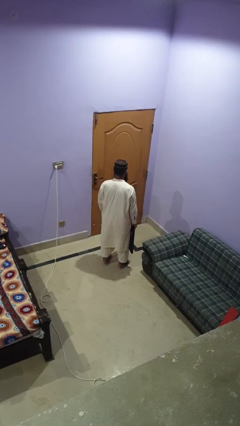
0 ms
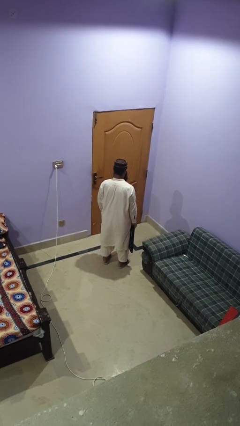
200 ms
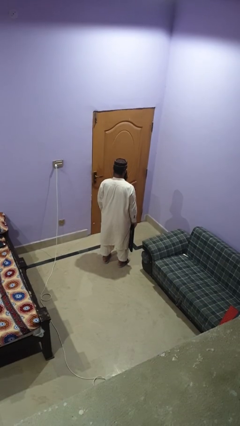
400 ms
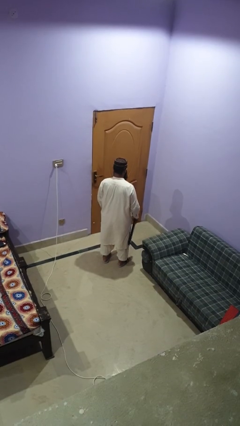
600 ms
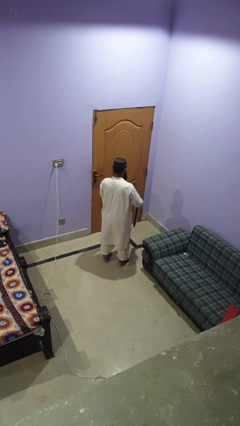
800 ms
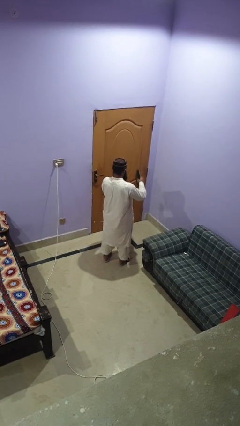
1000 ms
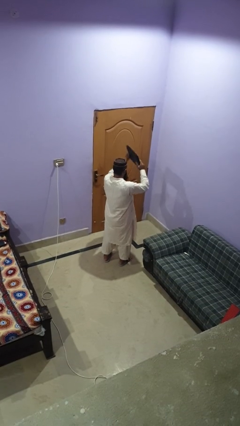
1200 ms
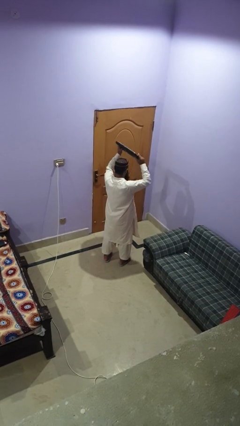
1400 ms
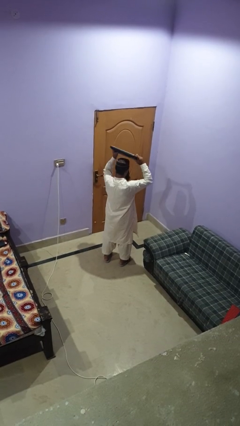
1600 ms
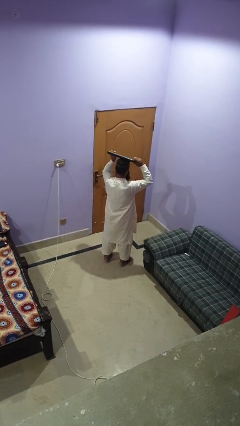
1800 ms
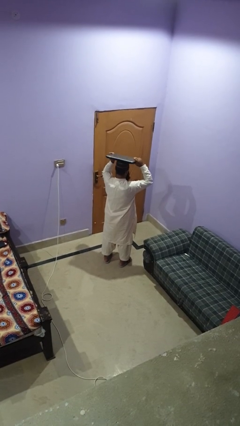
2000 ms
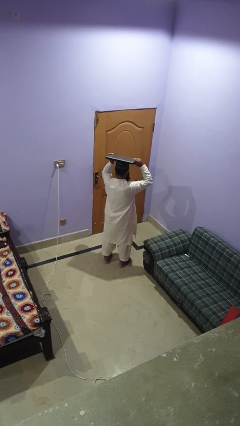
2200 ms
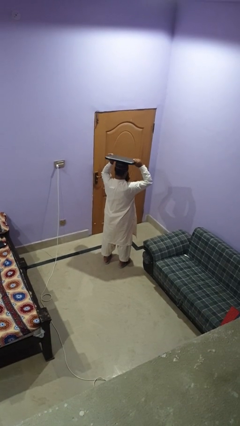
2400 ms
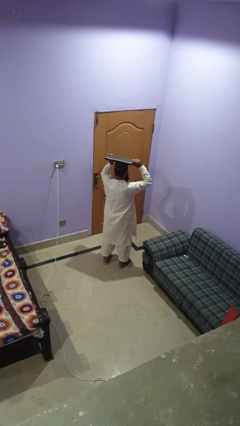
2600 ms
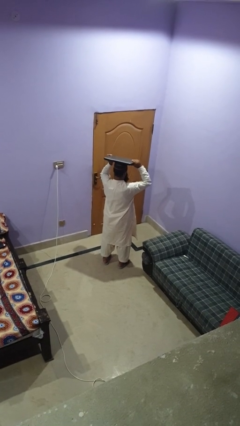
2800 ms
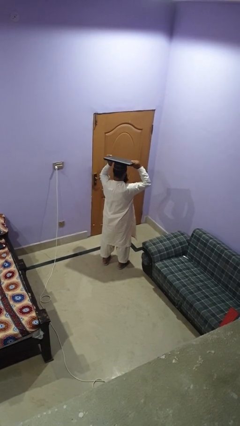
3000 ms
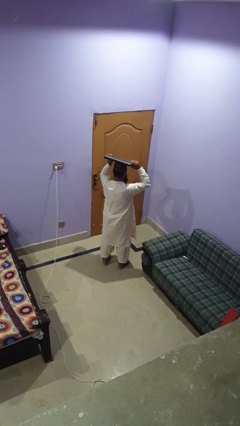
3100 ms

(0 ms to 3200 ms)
person holds object above head

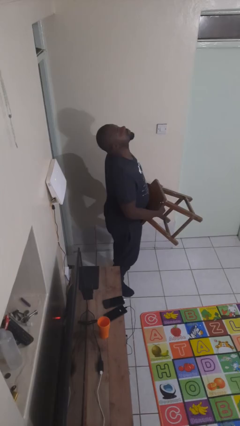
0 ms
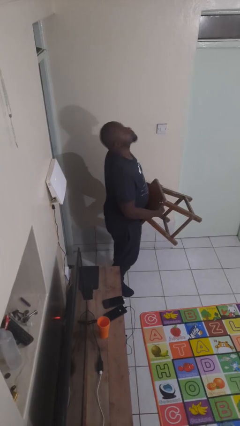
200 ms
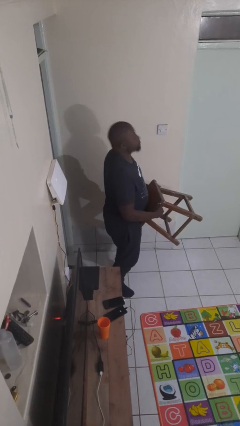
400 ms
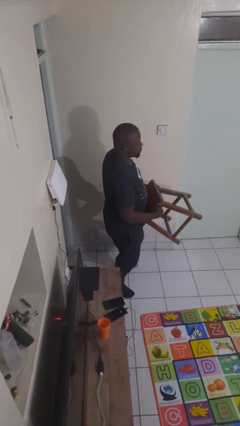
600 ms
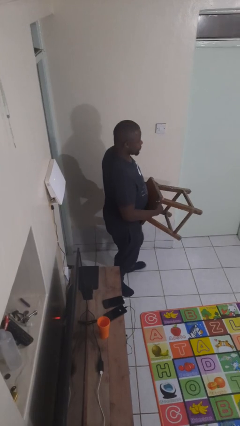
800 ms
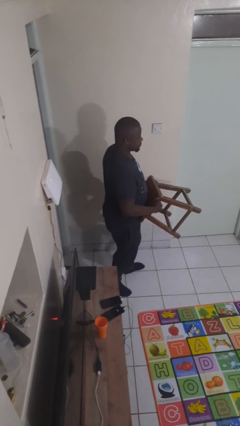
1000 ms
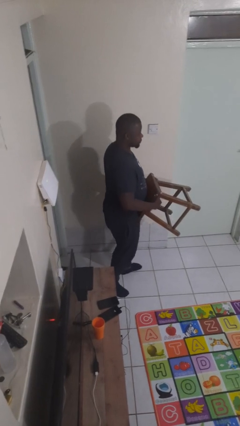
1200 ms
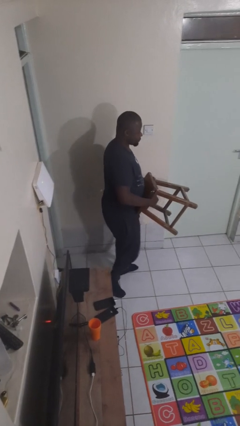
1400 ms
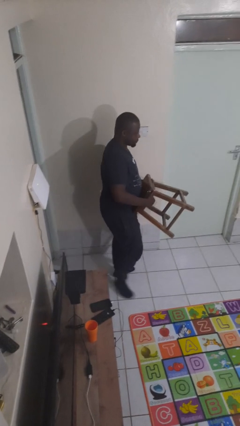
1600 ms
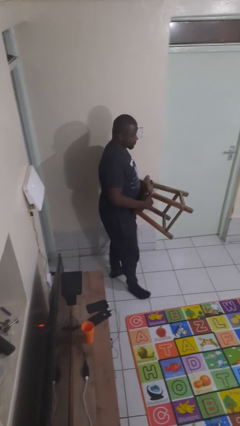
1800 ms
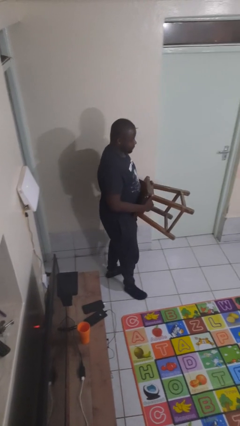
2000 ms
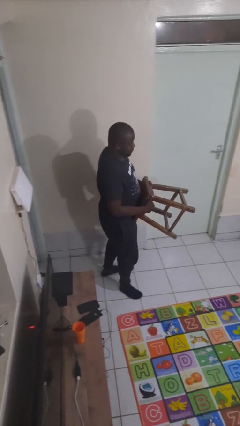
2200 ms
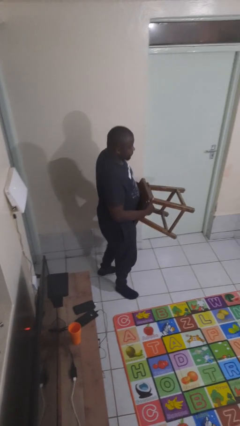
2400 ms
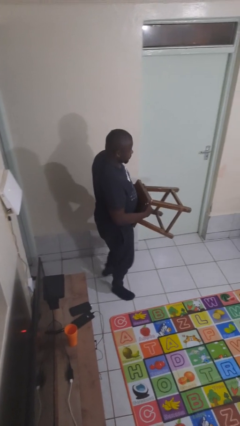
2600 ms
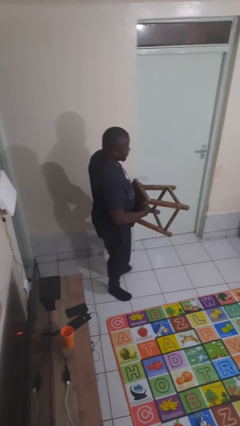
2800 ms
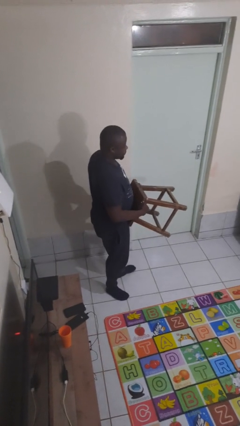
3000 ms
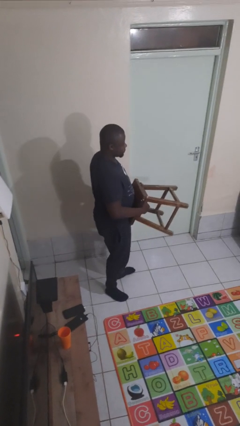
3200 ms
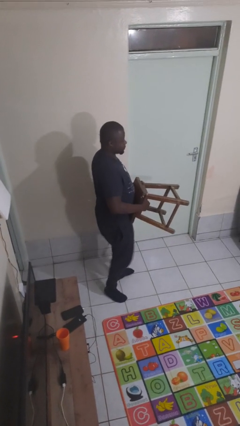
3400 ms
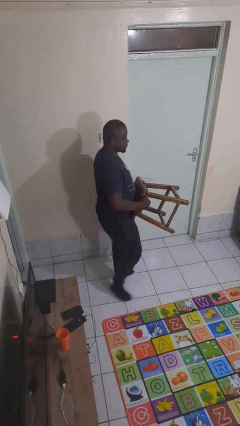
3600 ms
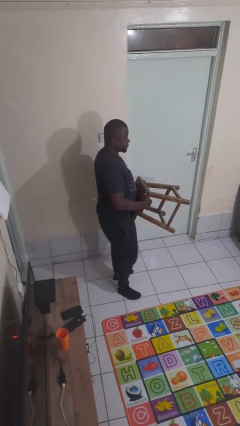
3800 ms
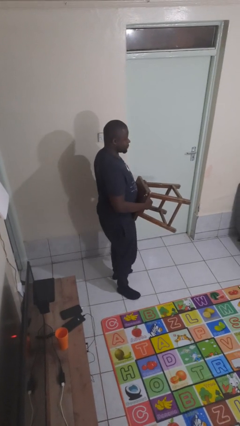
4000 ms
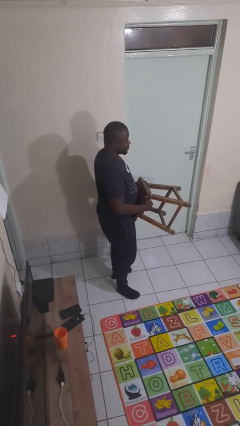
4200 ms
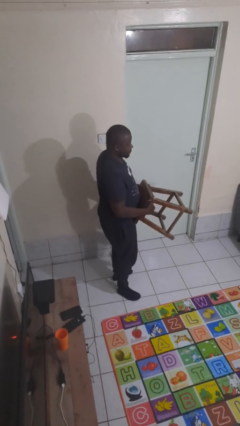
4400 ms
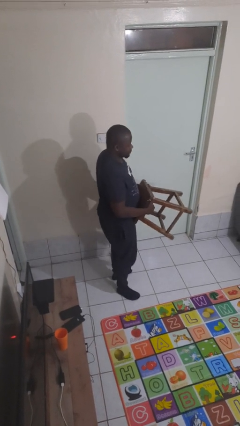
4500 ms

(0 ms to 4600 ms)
person carries furniture

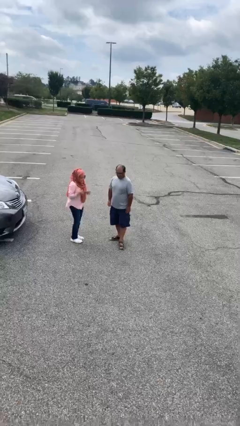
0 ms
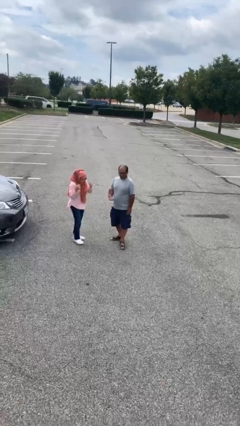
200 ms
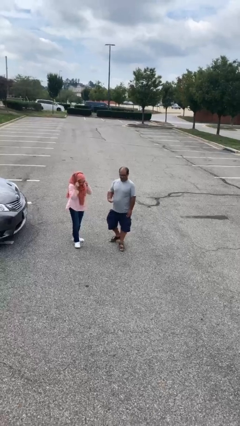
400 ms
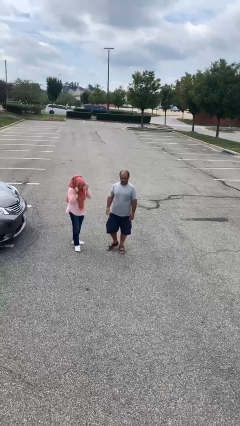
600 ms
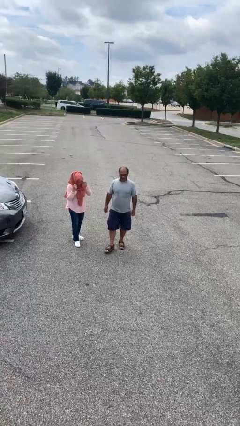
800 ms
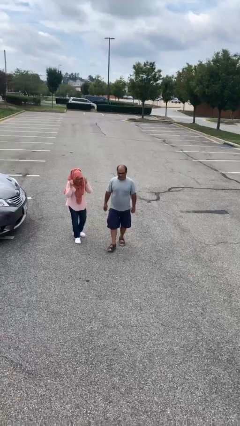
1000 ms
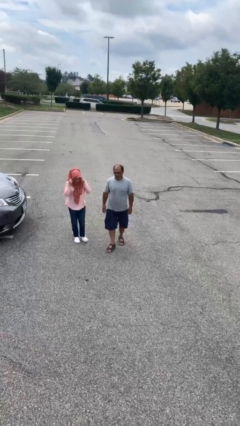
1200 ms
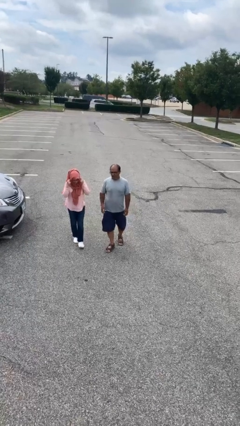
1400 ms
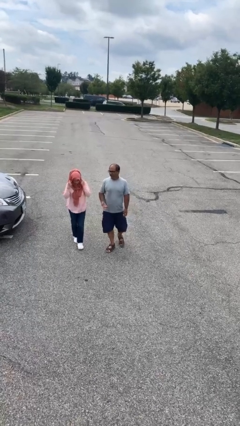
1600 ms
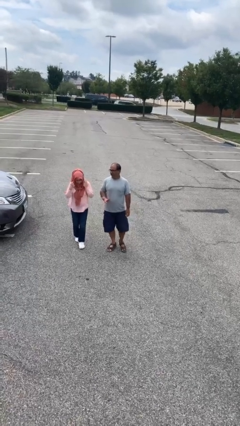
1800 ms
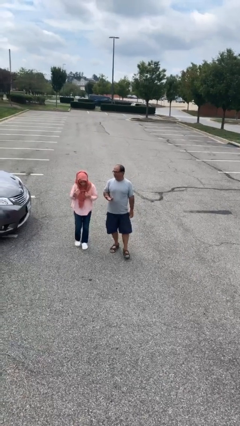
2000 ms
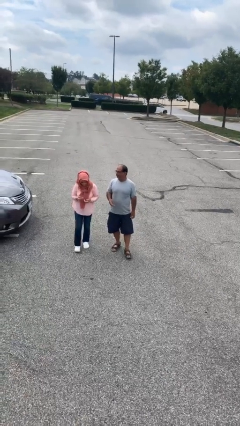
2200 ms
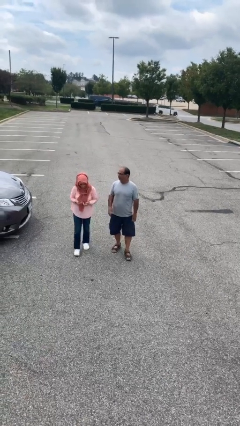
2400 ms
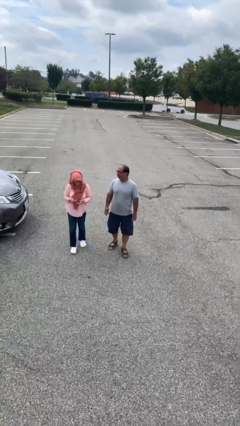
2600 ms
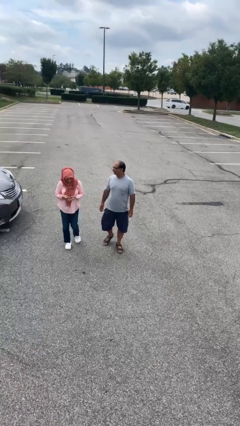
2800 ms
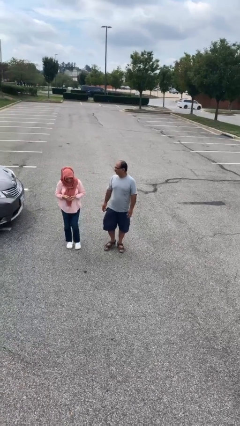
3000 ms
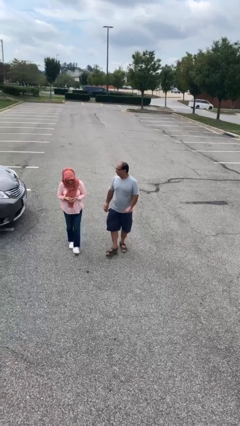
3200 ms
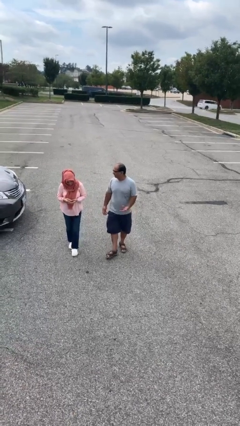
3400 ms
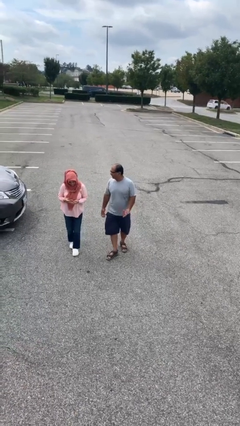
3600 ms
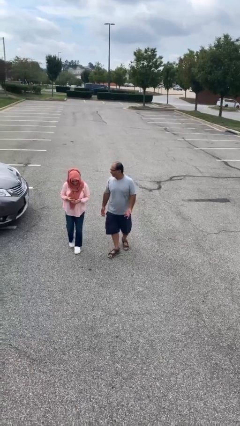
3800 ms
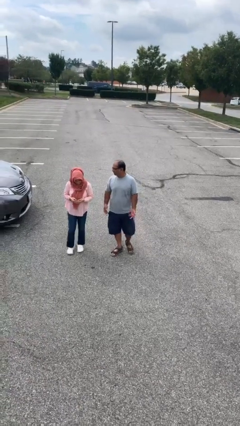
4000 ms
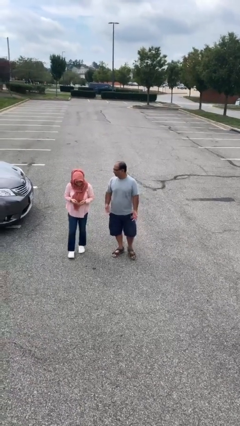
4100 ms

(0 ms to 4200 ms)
person talks to person

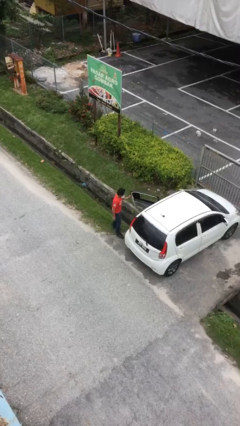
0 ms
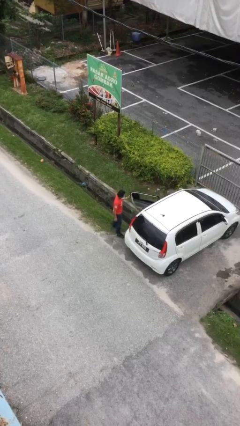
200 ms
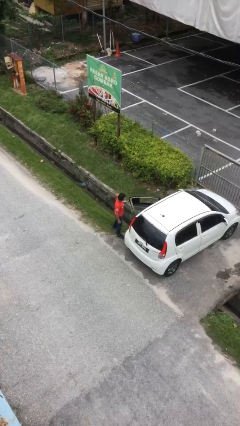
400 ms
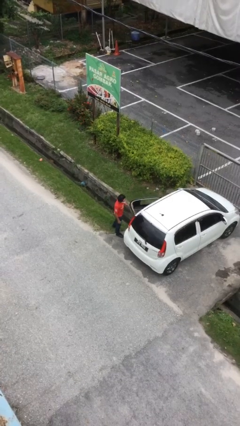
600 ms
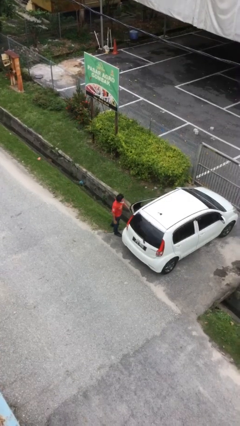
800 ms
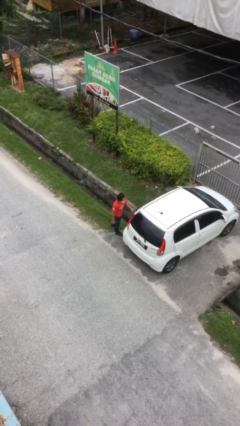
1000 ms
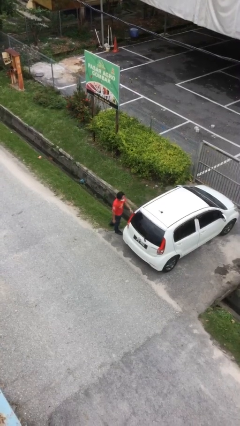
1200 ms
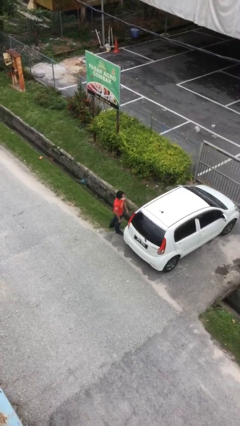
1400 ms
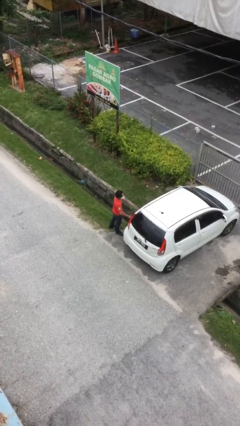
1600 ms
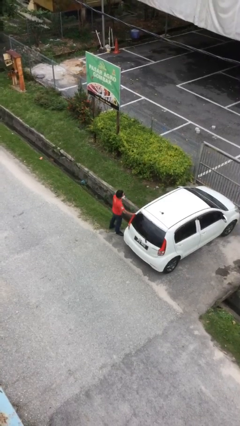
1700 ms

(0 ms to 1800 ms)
person closes car door

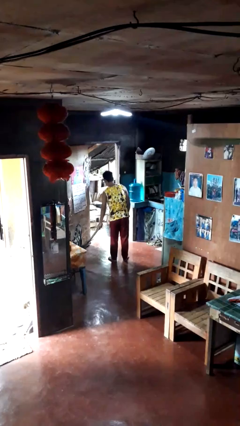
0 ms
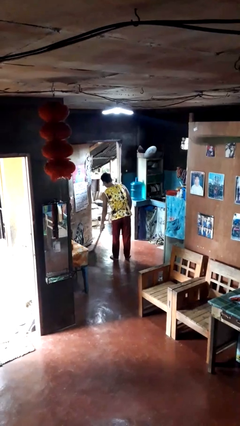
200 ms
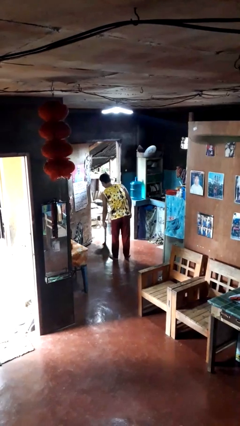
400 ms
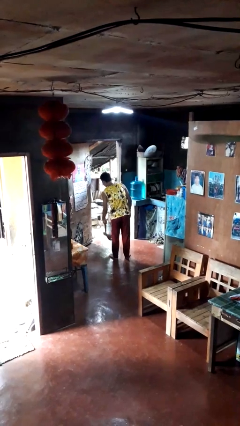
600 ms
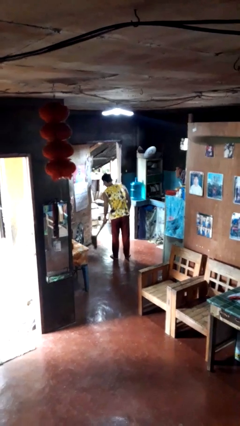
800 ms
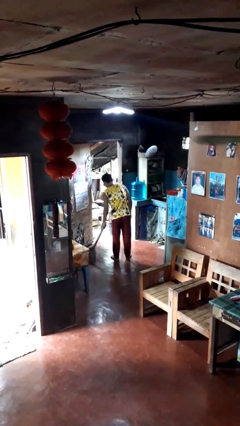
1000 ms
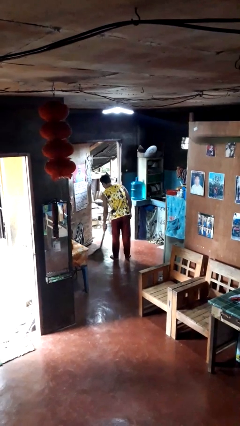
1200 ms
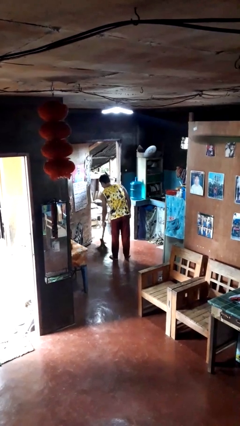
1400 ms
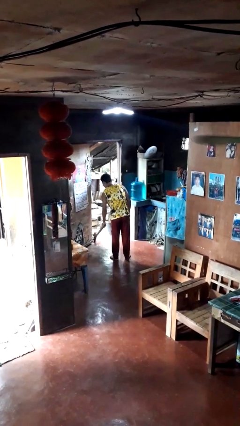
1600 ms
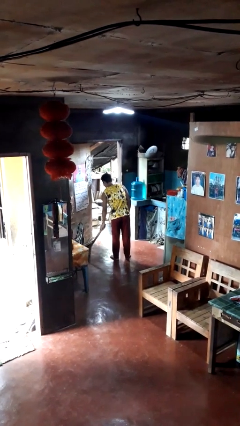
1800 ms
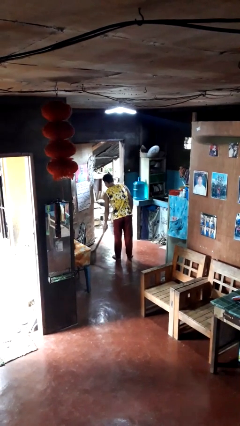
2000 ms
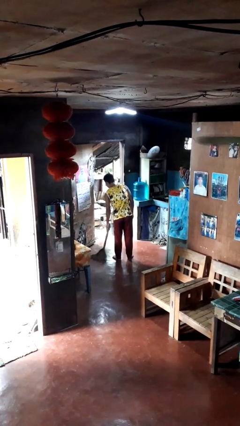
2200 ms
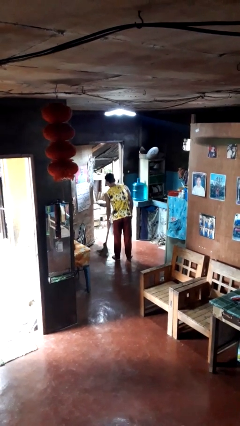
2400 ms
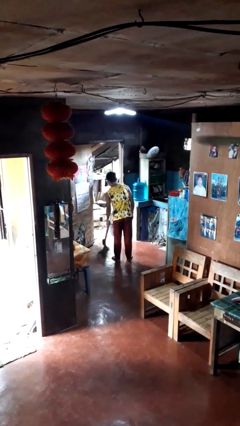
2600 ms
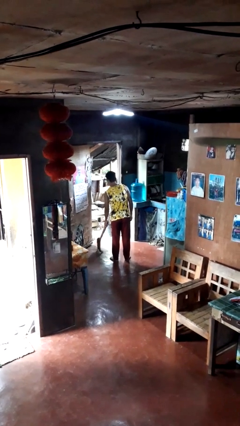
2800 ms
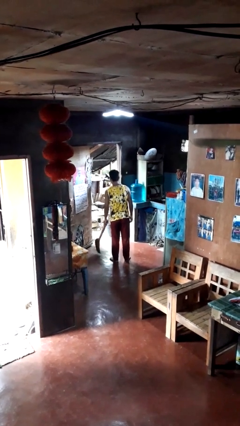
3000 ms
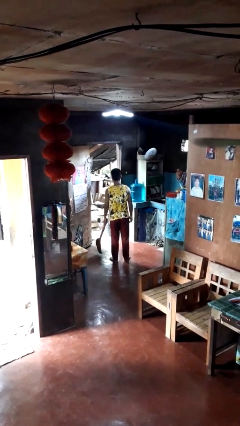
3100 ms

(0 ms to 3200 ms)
person sweeps floor

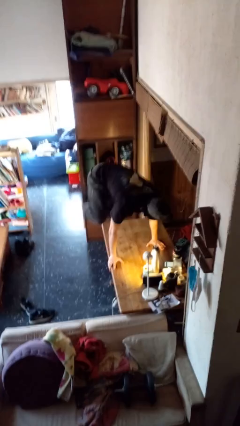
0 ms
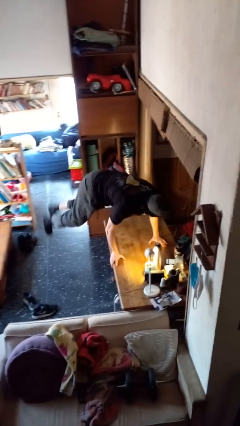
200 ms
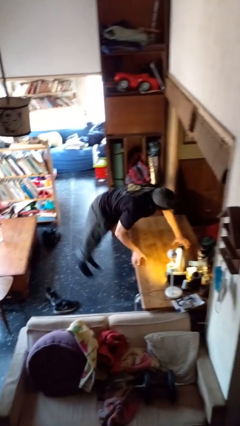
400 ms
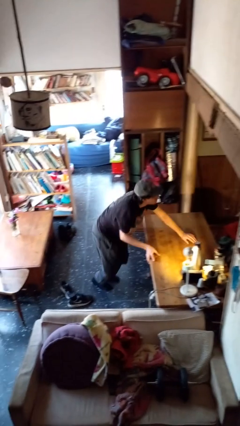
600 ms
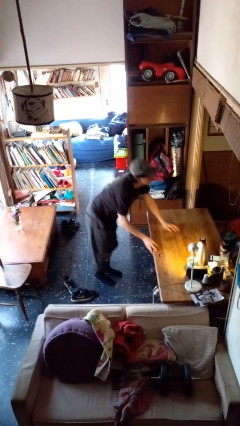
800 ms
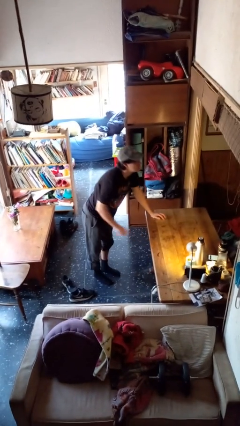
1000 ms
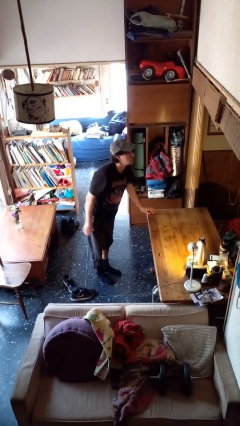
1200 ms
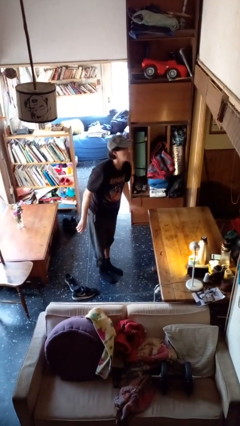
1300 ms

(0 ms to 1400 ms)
person climbs off table
